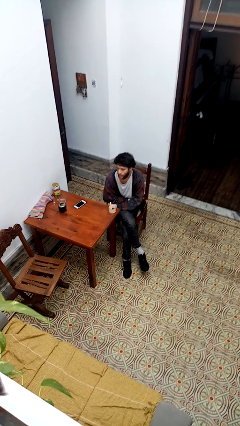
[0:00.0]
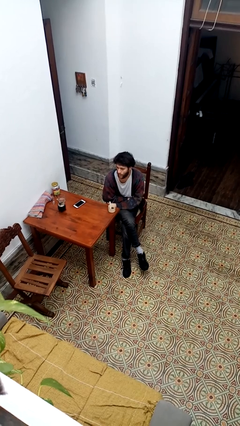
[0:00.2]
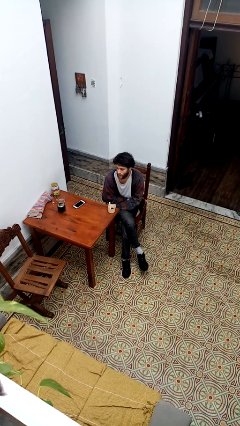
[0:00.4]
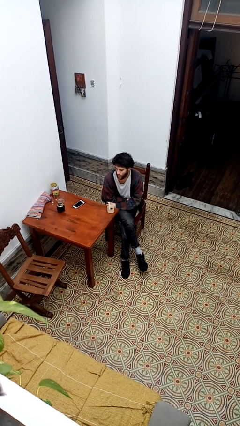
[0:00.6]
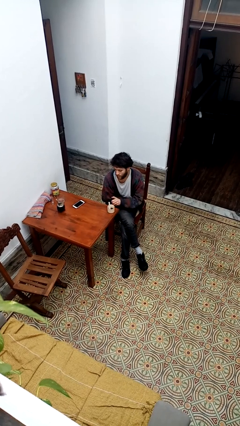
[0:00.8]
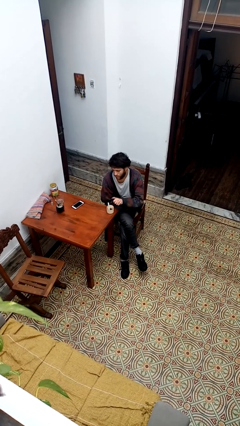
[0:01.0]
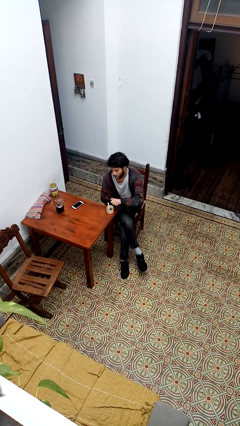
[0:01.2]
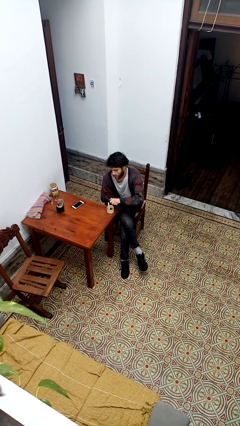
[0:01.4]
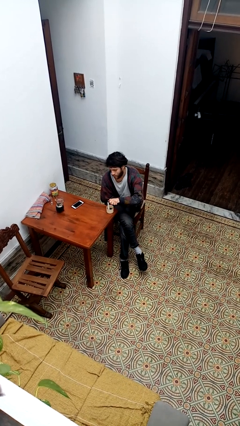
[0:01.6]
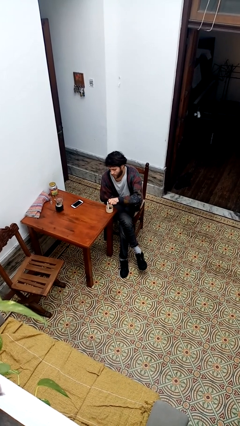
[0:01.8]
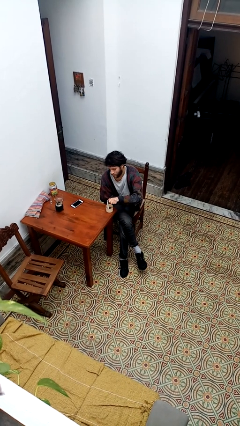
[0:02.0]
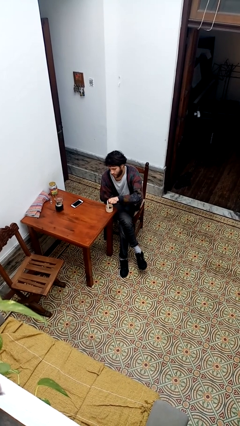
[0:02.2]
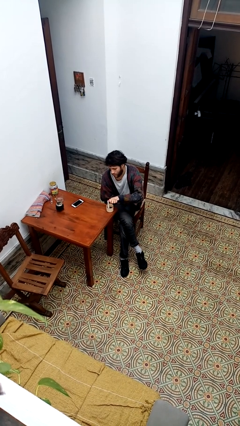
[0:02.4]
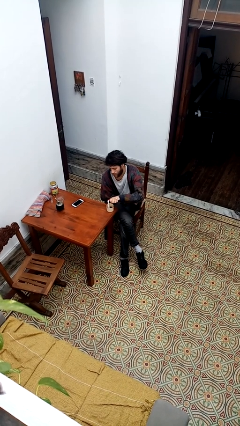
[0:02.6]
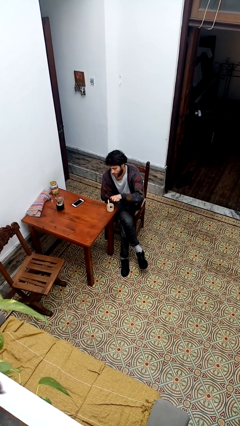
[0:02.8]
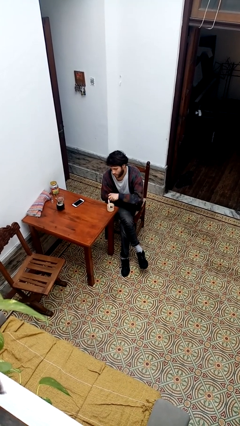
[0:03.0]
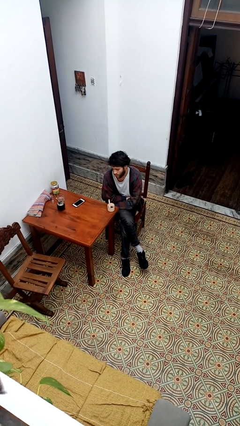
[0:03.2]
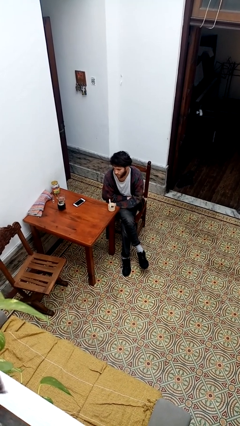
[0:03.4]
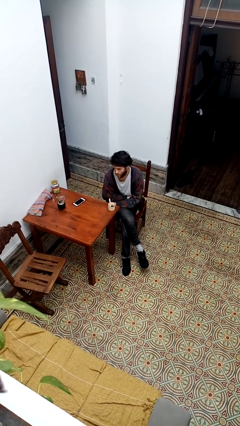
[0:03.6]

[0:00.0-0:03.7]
person lights candle

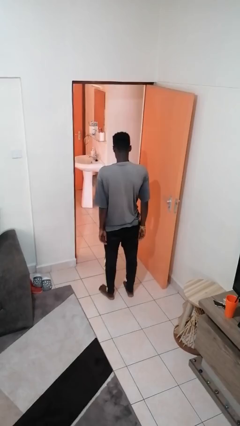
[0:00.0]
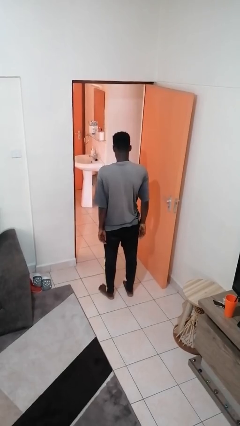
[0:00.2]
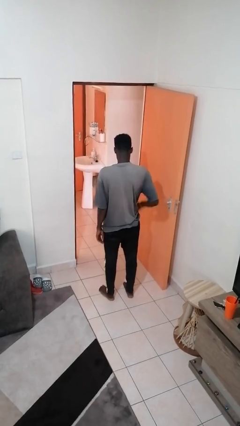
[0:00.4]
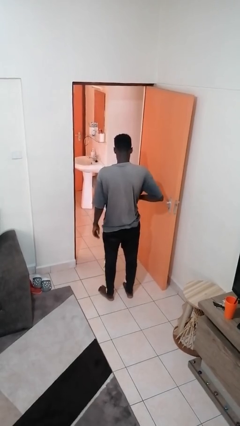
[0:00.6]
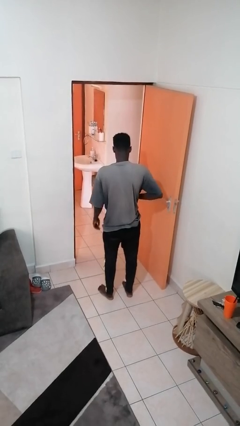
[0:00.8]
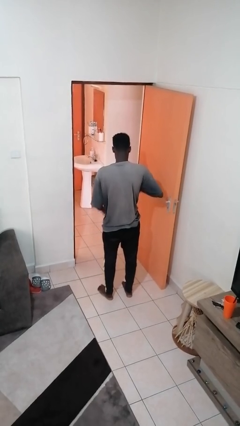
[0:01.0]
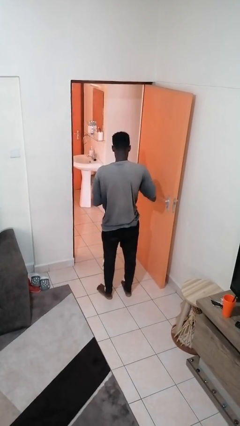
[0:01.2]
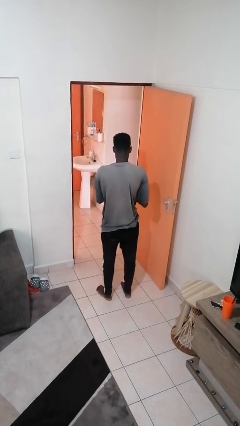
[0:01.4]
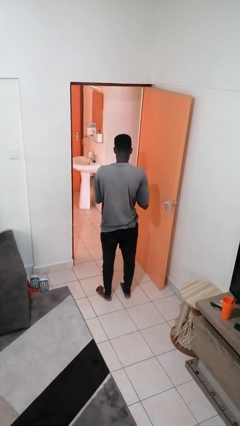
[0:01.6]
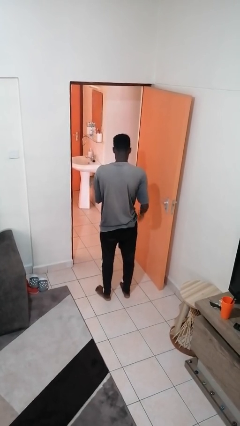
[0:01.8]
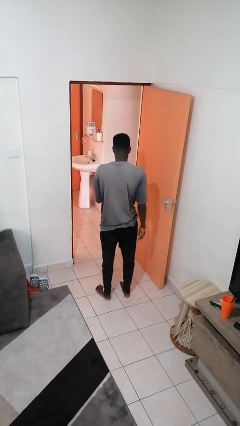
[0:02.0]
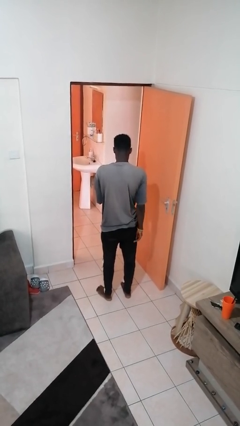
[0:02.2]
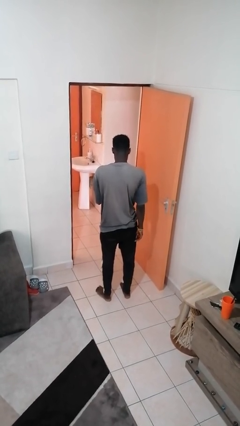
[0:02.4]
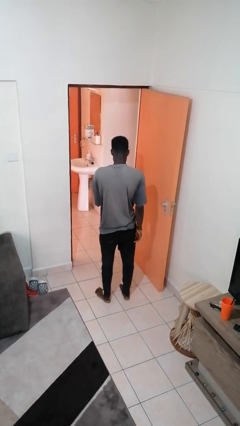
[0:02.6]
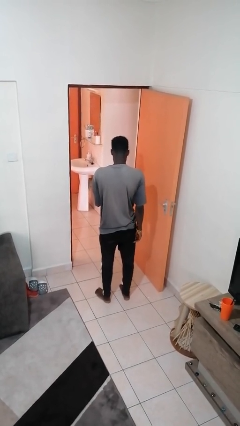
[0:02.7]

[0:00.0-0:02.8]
person takes phone from pocket

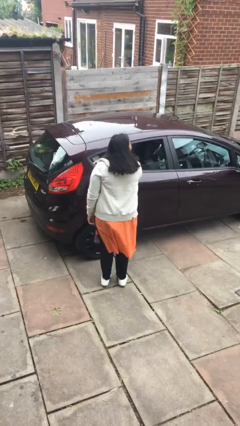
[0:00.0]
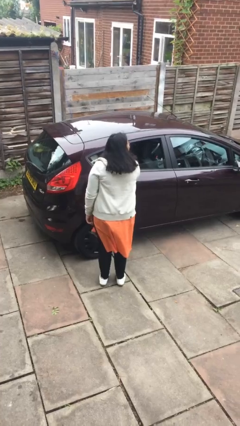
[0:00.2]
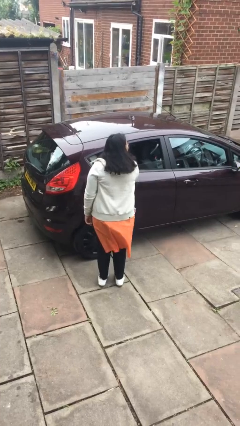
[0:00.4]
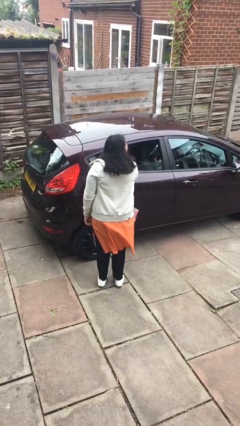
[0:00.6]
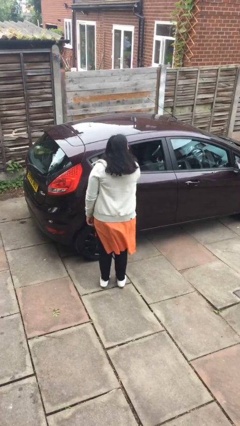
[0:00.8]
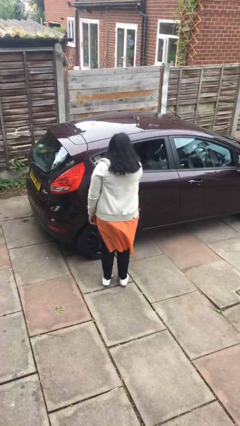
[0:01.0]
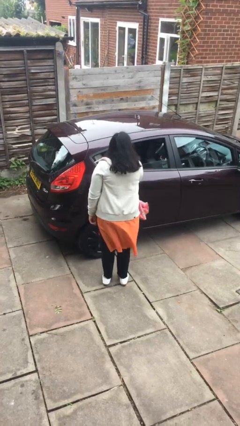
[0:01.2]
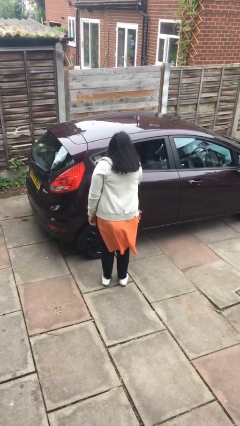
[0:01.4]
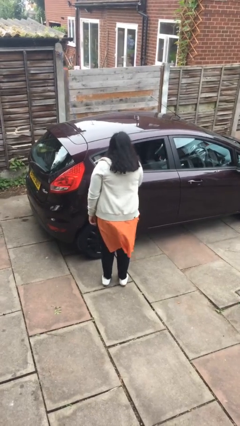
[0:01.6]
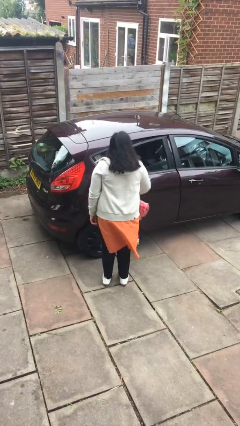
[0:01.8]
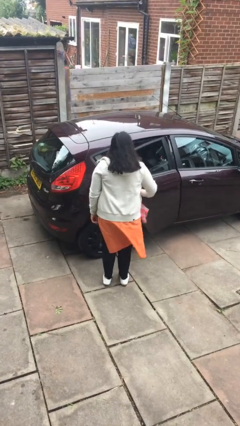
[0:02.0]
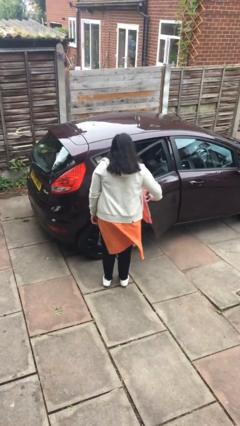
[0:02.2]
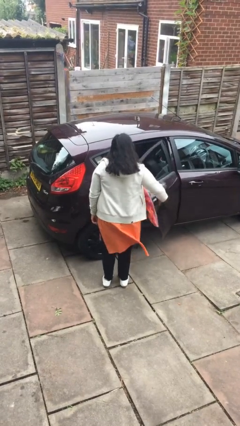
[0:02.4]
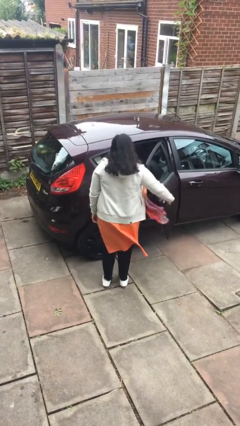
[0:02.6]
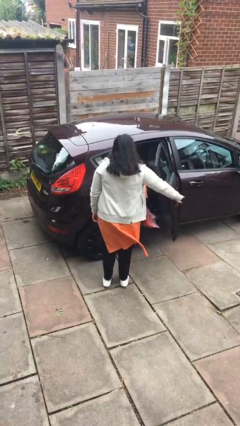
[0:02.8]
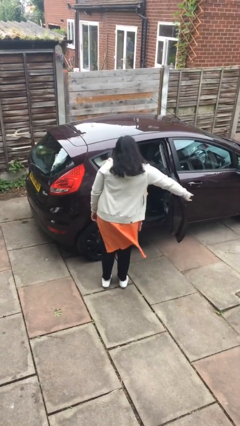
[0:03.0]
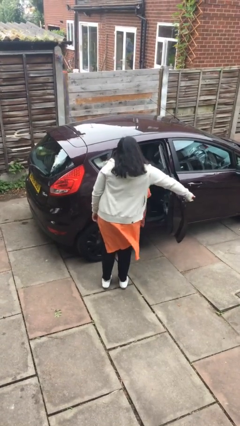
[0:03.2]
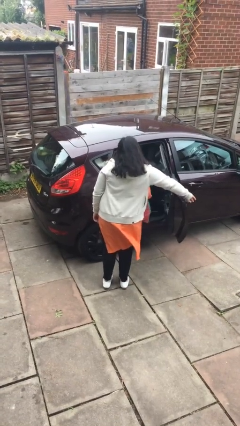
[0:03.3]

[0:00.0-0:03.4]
person opens car door

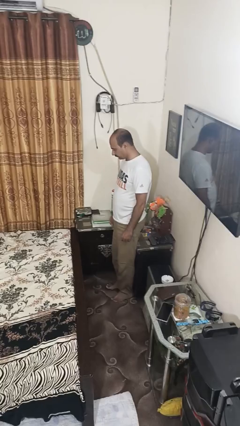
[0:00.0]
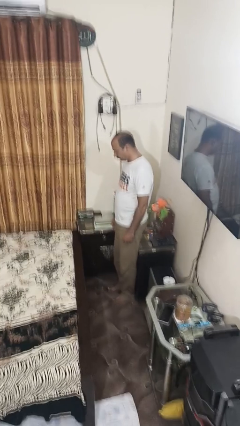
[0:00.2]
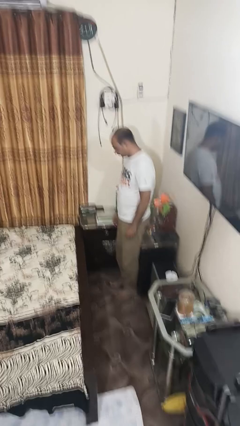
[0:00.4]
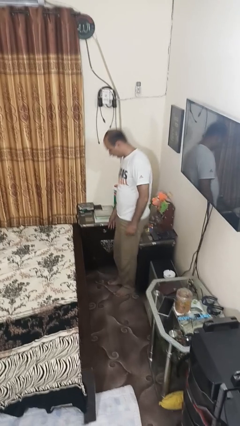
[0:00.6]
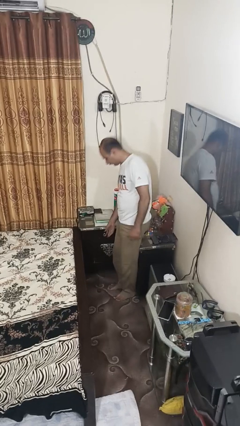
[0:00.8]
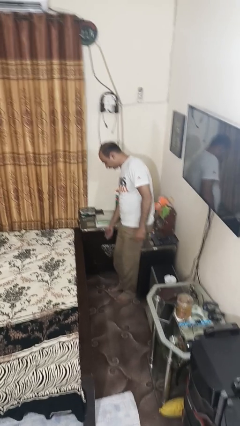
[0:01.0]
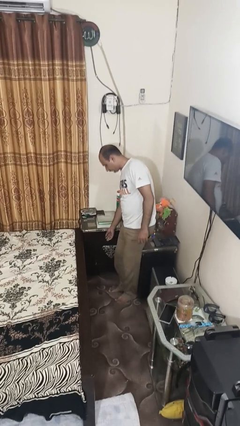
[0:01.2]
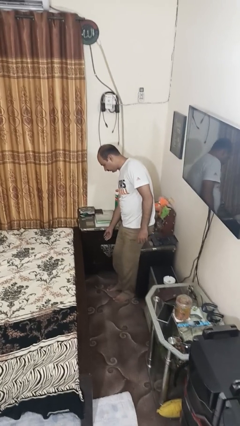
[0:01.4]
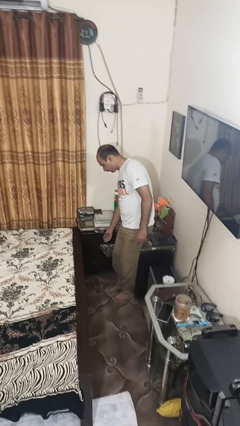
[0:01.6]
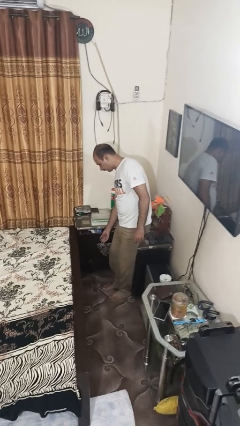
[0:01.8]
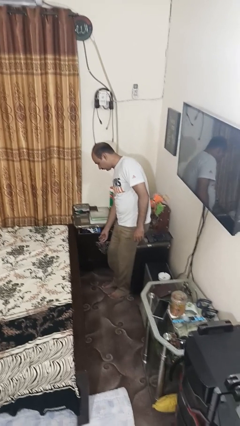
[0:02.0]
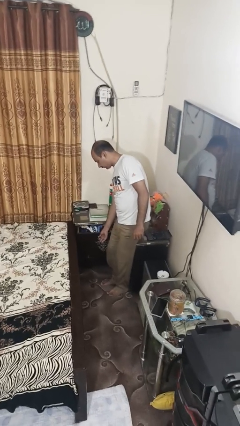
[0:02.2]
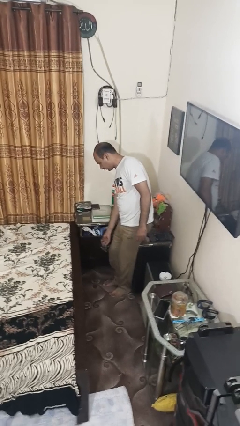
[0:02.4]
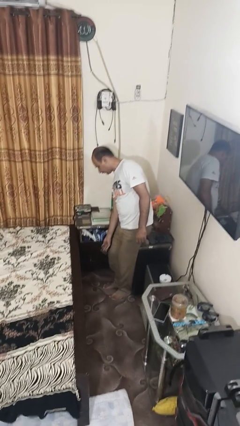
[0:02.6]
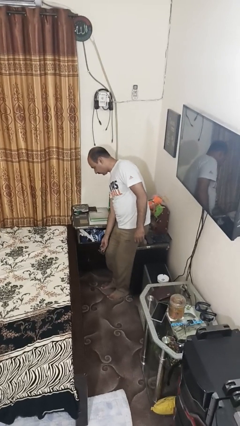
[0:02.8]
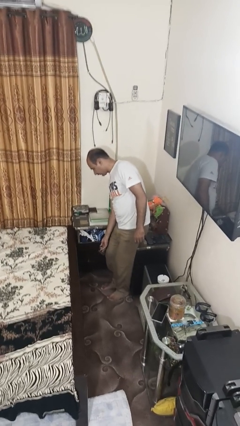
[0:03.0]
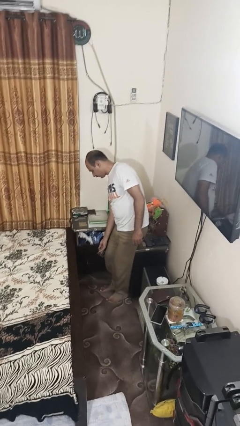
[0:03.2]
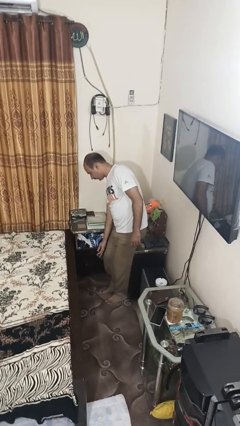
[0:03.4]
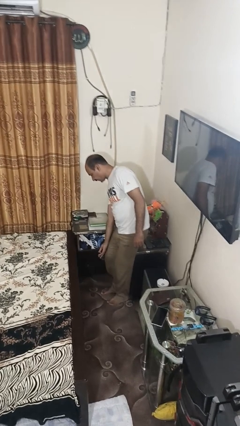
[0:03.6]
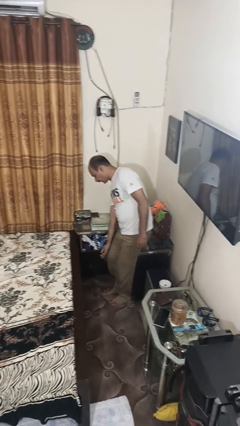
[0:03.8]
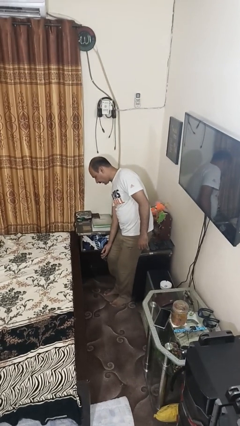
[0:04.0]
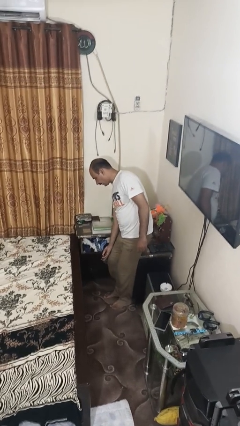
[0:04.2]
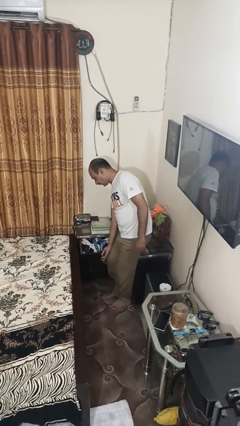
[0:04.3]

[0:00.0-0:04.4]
person opens dresser drawer

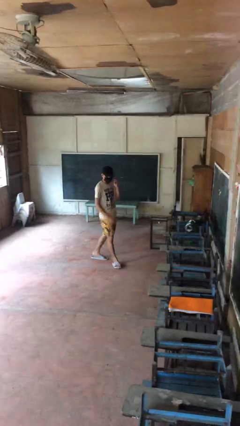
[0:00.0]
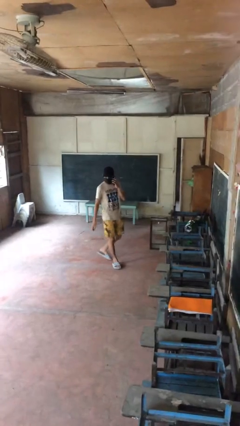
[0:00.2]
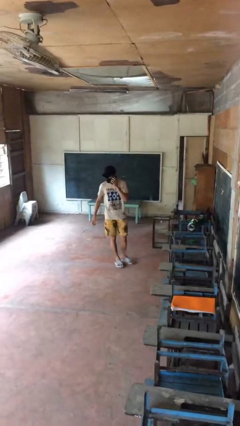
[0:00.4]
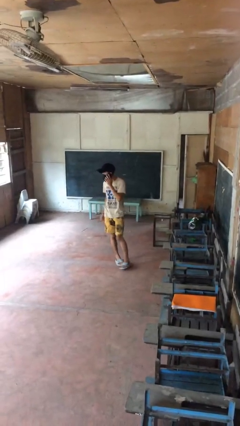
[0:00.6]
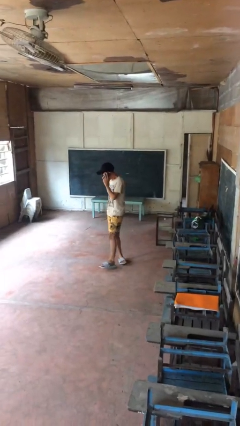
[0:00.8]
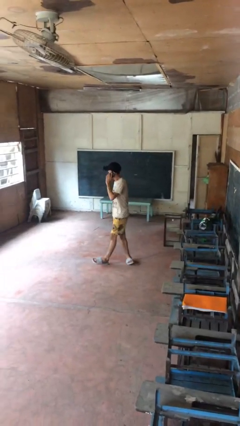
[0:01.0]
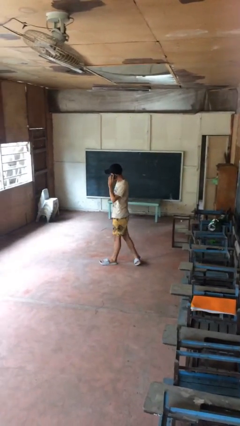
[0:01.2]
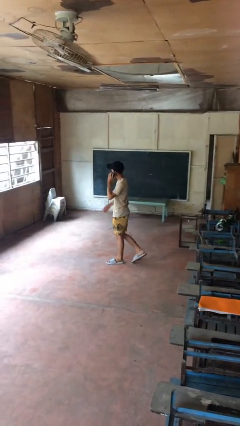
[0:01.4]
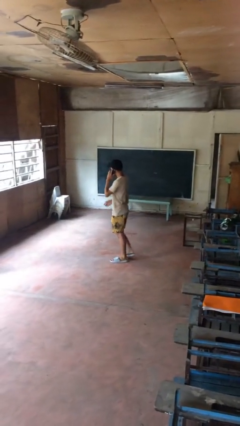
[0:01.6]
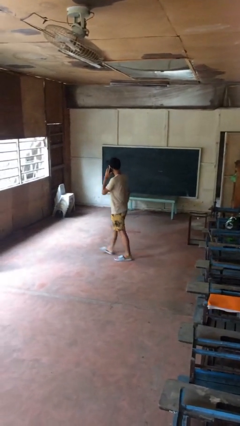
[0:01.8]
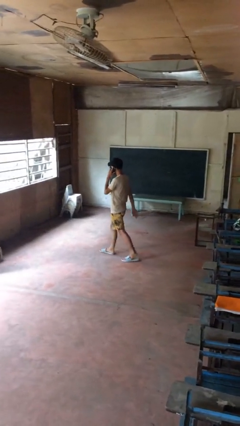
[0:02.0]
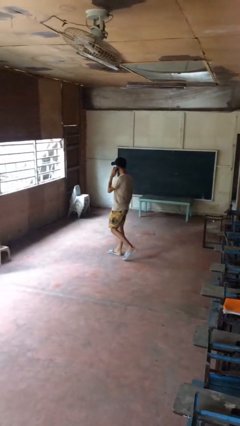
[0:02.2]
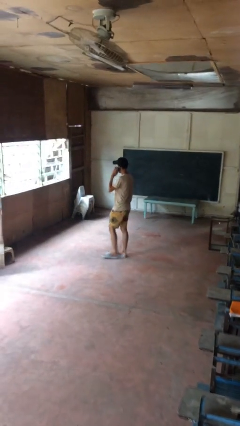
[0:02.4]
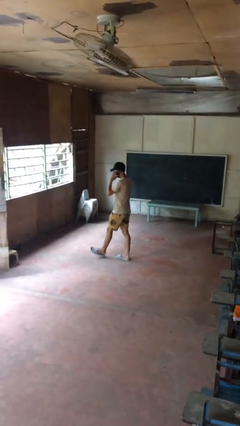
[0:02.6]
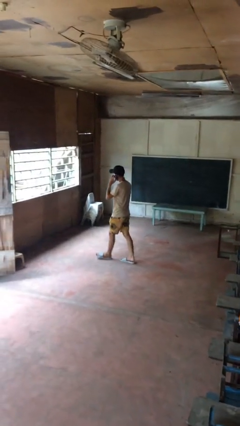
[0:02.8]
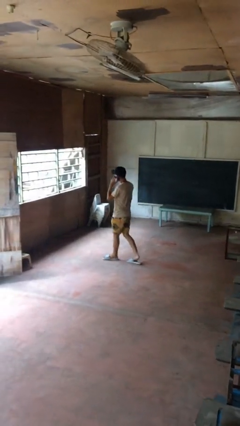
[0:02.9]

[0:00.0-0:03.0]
person talks on phone

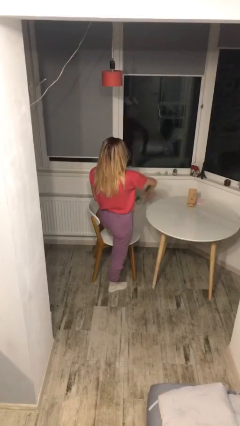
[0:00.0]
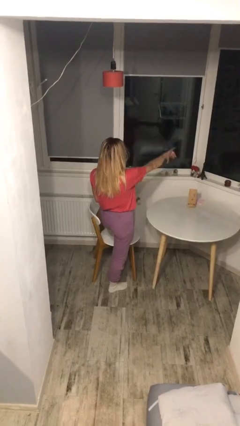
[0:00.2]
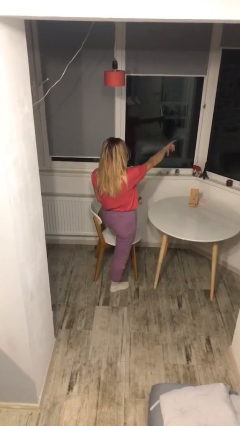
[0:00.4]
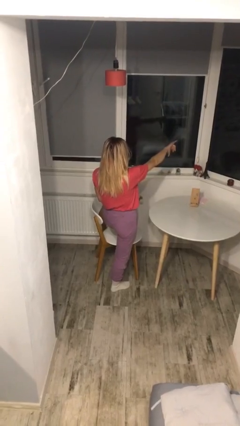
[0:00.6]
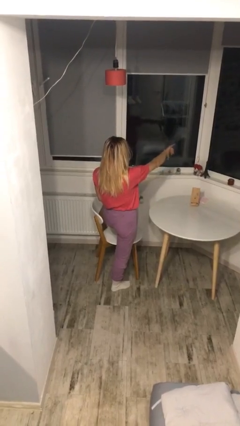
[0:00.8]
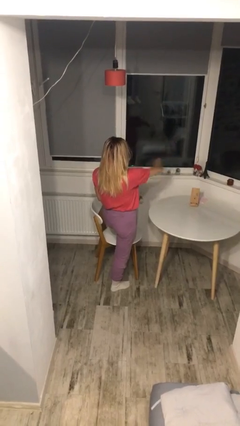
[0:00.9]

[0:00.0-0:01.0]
person gestures hang loose
